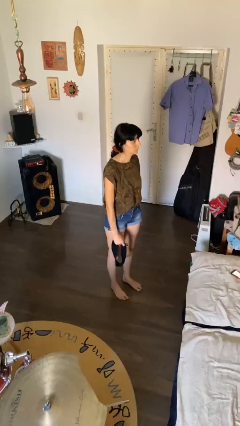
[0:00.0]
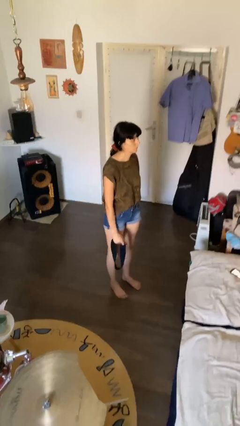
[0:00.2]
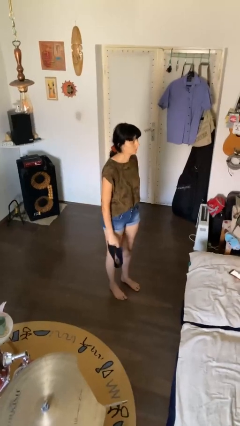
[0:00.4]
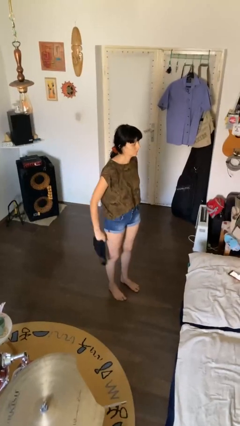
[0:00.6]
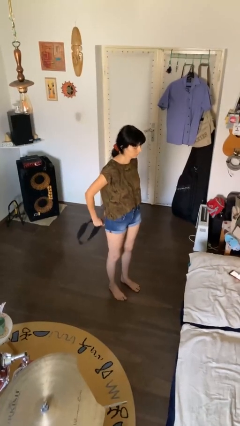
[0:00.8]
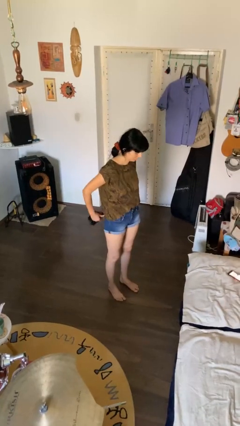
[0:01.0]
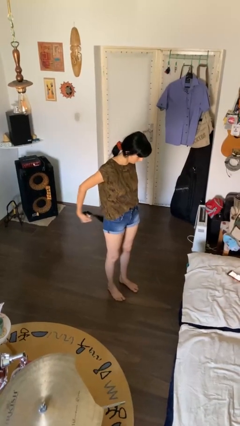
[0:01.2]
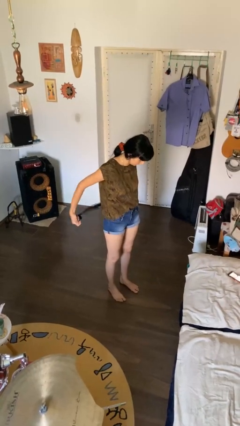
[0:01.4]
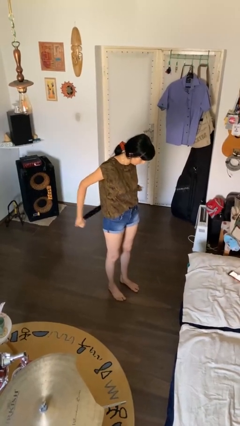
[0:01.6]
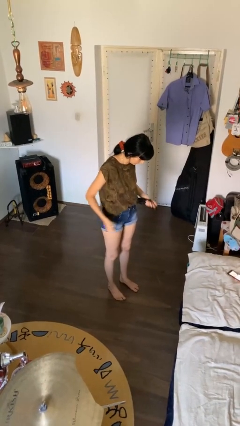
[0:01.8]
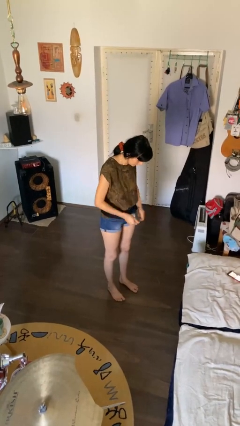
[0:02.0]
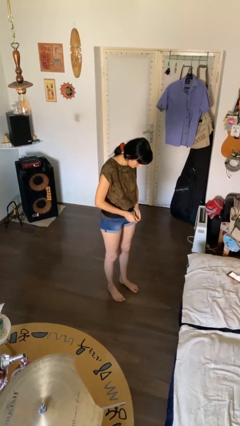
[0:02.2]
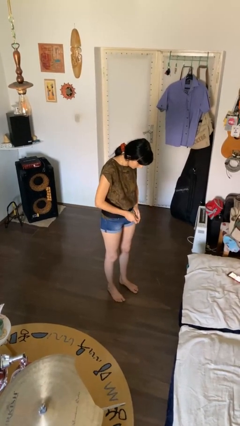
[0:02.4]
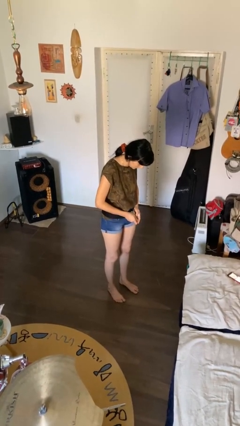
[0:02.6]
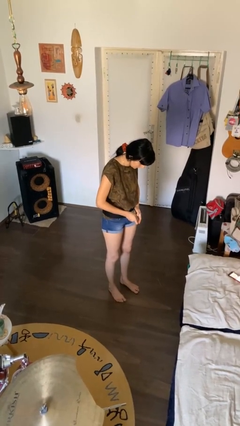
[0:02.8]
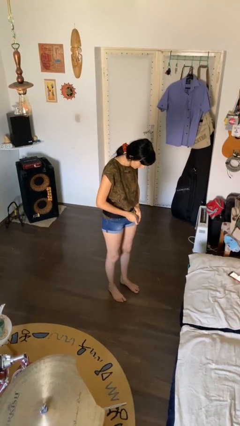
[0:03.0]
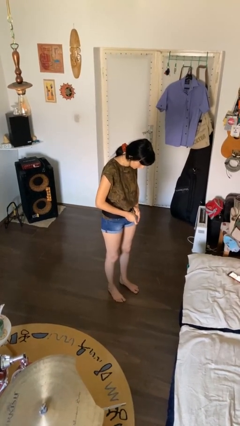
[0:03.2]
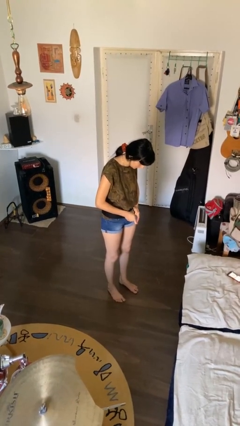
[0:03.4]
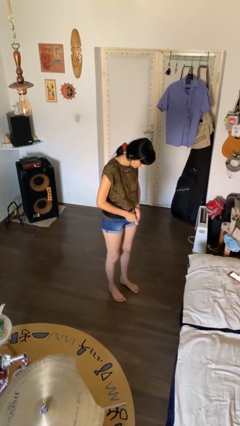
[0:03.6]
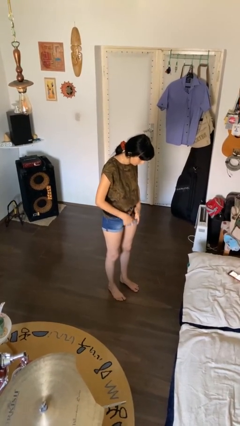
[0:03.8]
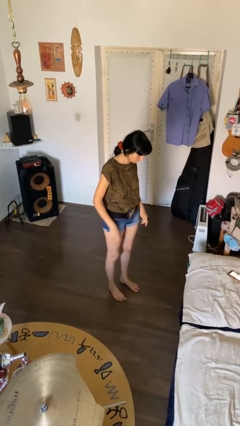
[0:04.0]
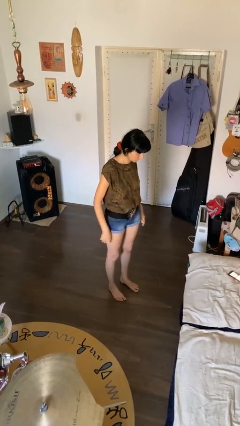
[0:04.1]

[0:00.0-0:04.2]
person puts on belt

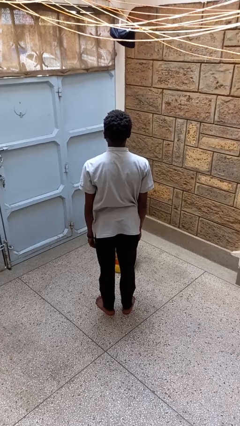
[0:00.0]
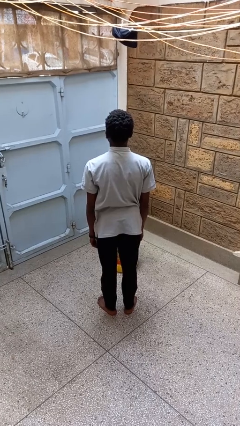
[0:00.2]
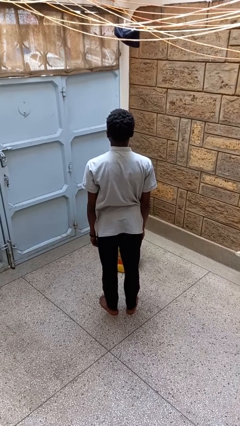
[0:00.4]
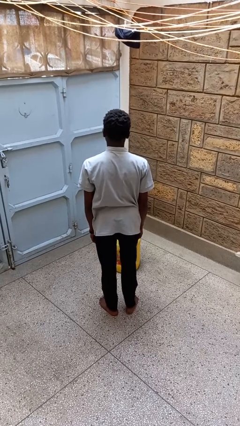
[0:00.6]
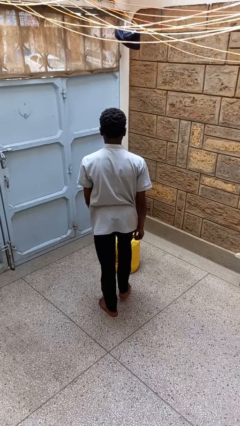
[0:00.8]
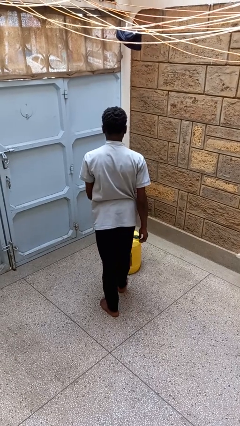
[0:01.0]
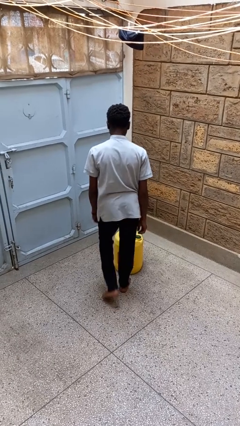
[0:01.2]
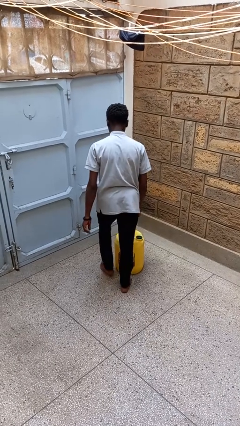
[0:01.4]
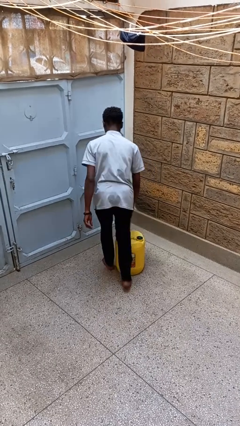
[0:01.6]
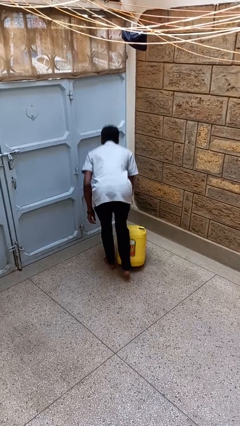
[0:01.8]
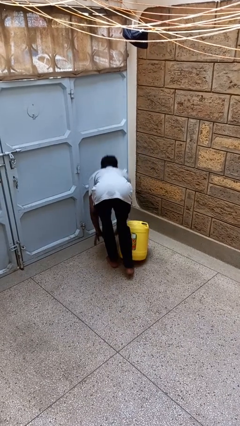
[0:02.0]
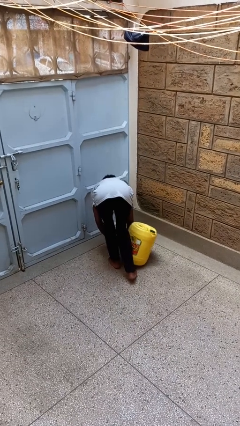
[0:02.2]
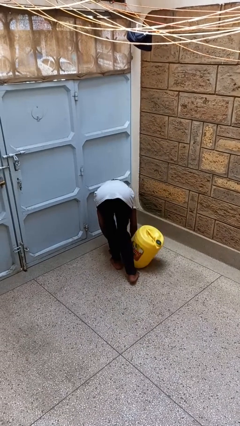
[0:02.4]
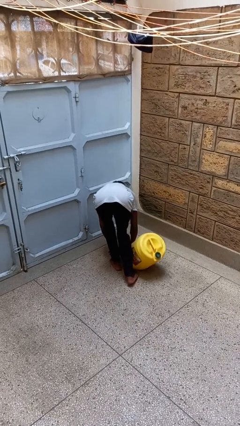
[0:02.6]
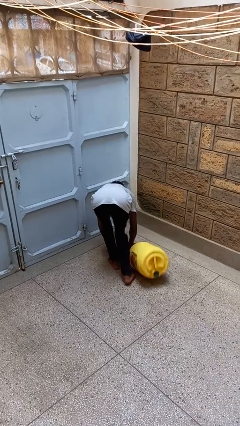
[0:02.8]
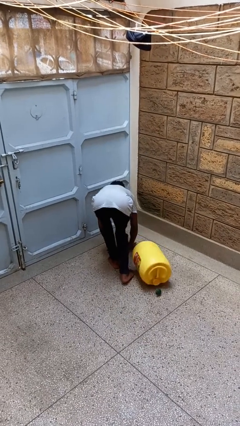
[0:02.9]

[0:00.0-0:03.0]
person trips on object on floor

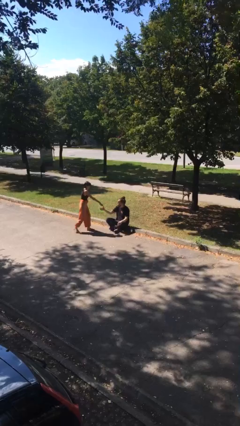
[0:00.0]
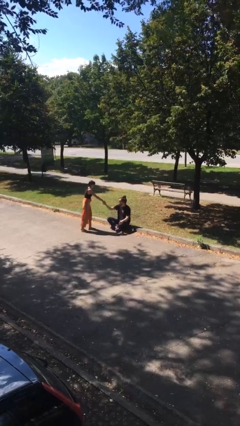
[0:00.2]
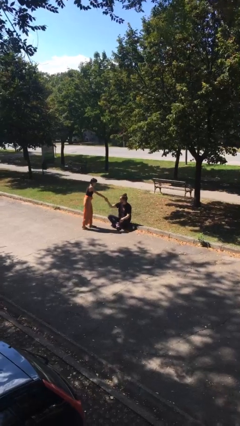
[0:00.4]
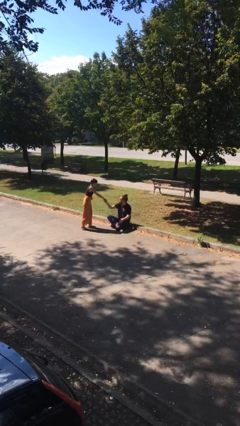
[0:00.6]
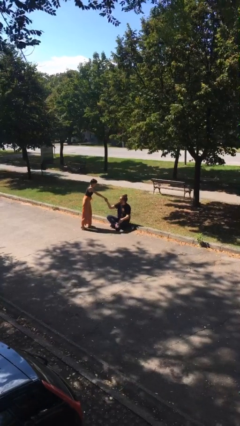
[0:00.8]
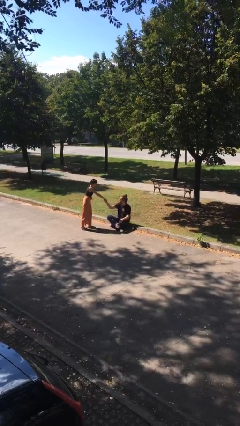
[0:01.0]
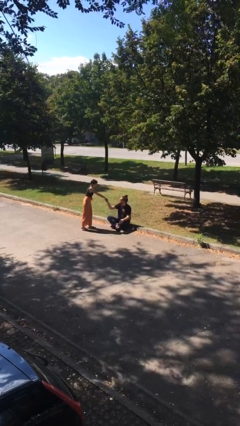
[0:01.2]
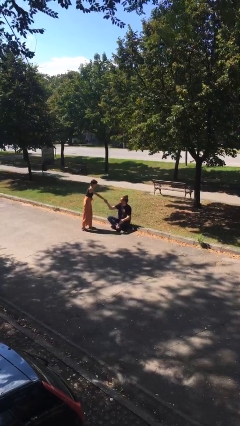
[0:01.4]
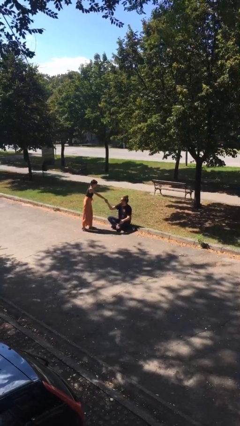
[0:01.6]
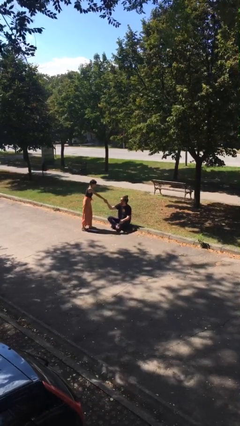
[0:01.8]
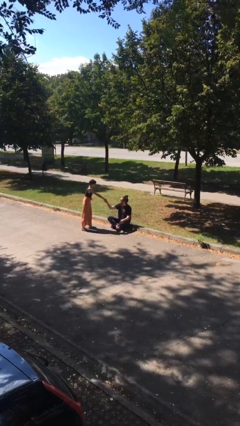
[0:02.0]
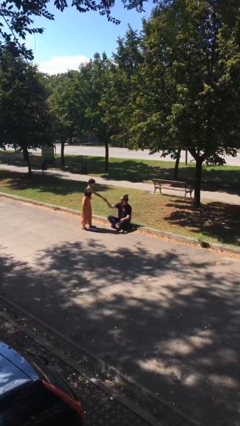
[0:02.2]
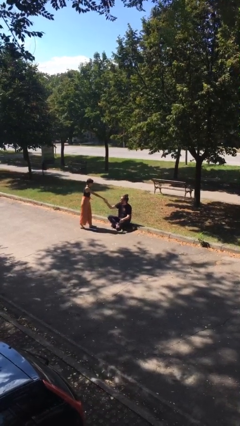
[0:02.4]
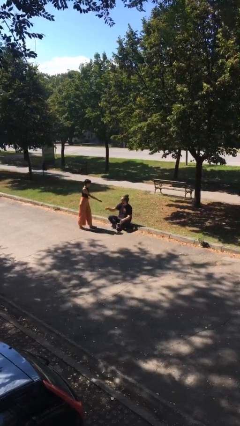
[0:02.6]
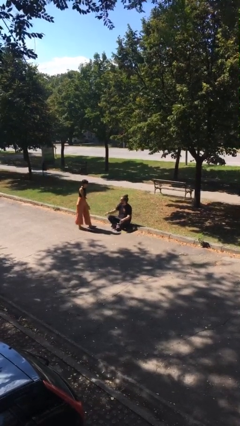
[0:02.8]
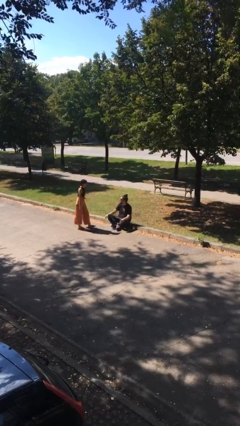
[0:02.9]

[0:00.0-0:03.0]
person shakes hand

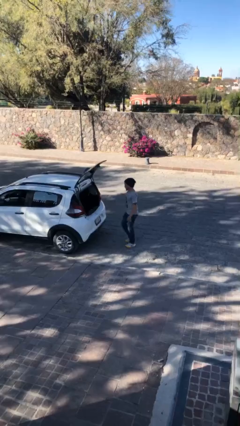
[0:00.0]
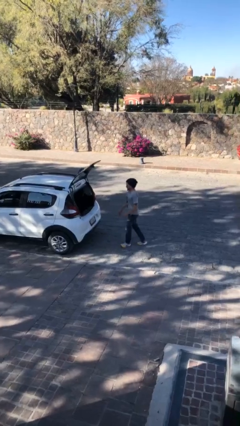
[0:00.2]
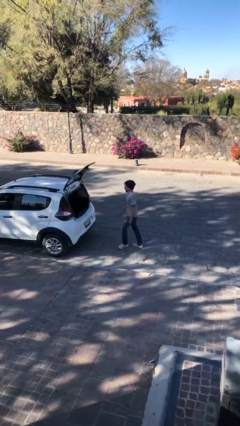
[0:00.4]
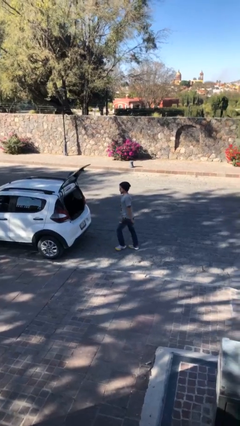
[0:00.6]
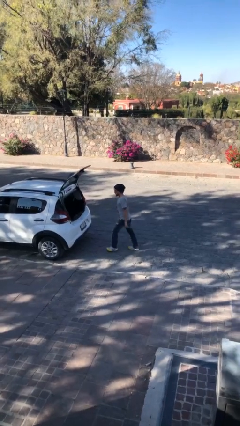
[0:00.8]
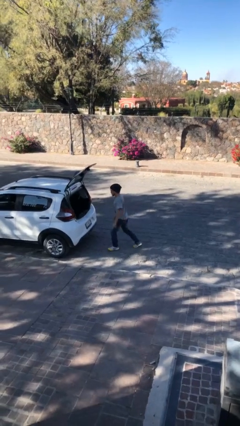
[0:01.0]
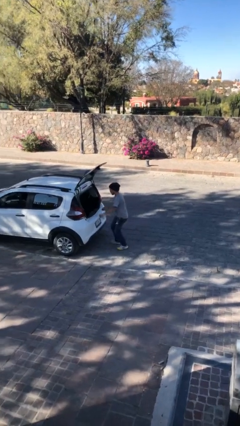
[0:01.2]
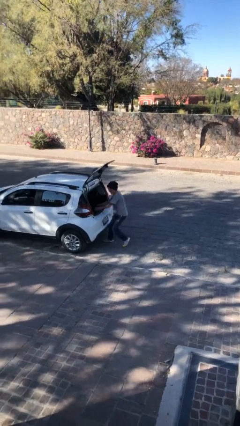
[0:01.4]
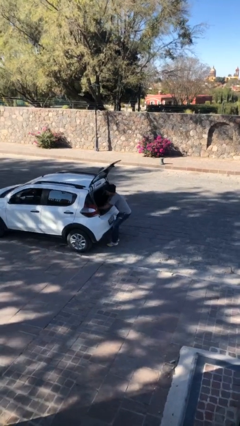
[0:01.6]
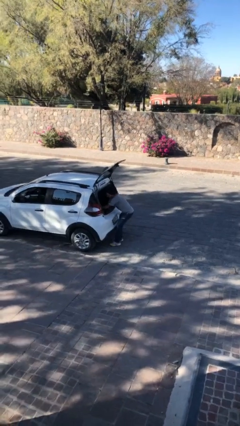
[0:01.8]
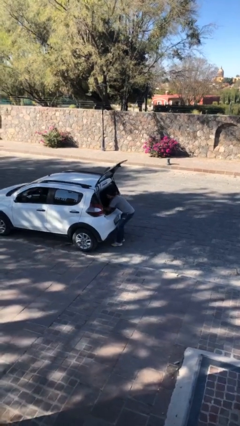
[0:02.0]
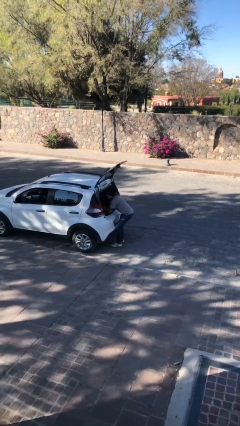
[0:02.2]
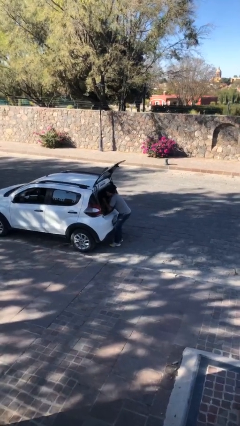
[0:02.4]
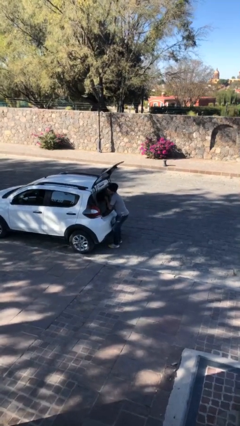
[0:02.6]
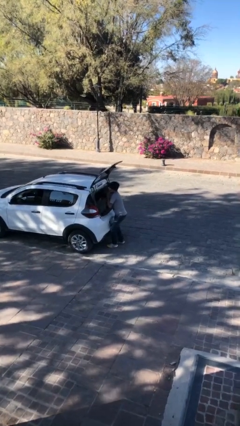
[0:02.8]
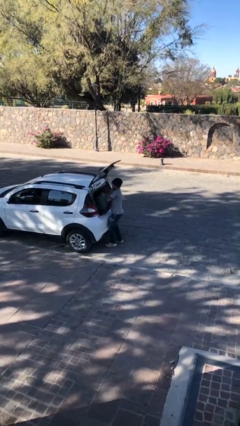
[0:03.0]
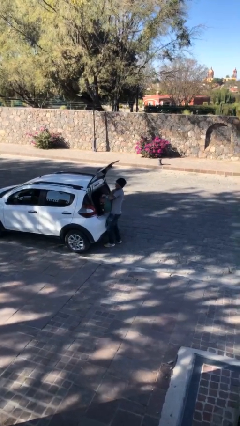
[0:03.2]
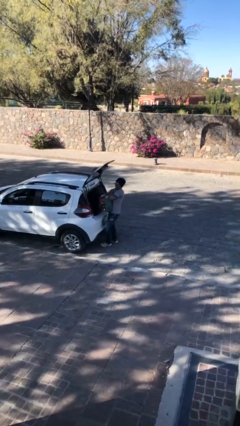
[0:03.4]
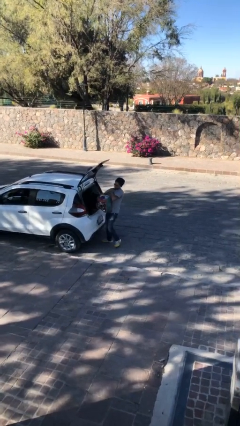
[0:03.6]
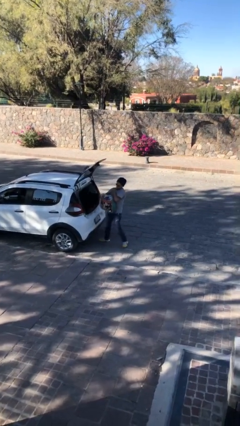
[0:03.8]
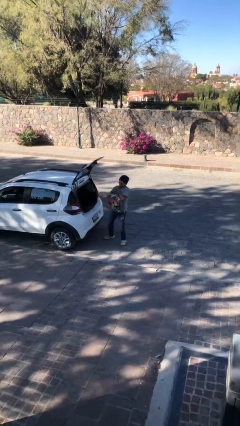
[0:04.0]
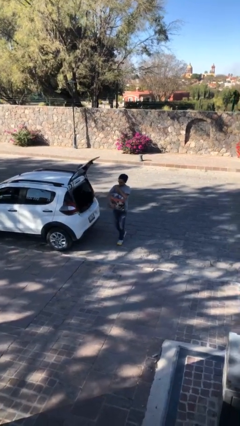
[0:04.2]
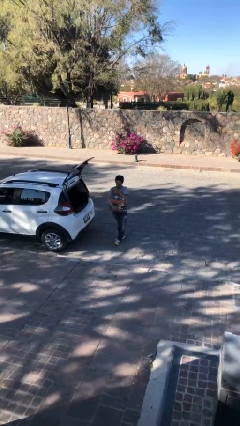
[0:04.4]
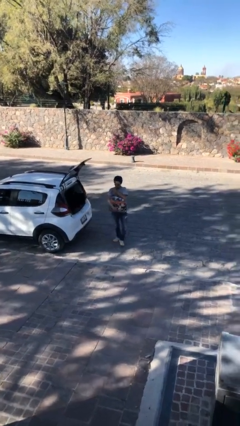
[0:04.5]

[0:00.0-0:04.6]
person unloads car

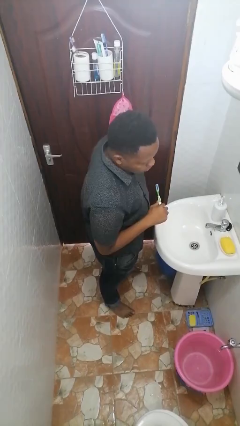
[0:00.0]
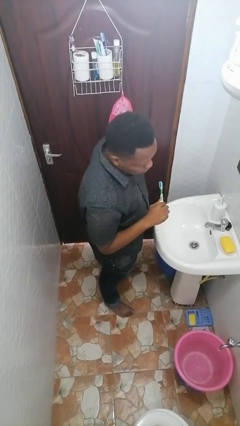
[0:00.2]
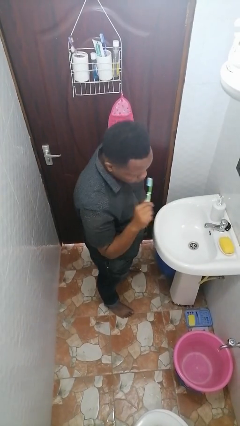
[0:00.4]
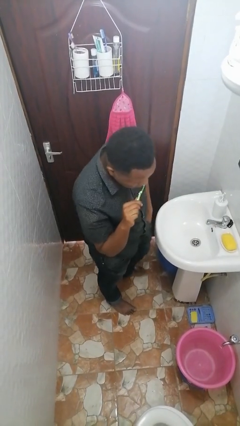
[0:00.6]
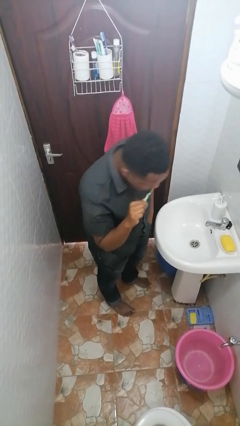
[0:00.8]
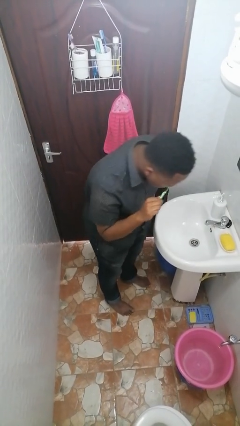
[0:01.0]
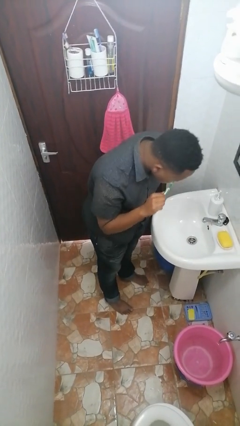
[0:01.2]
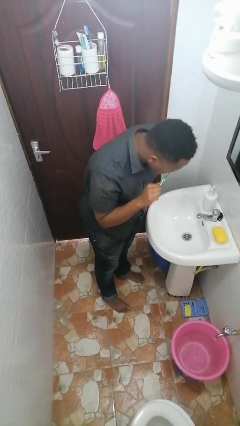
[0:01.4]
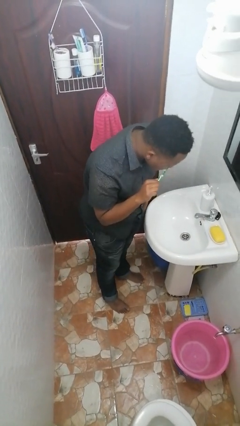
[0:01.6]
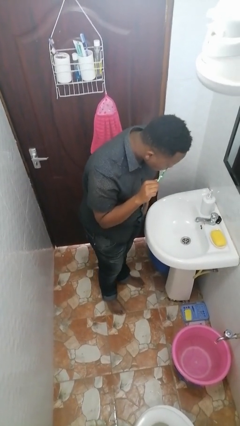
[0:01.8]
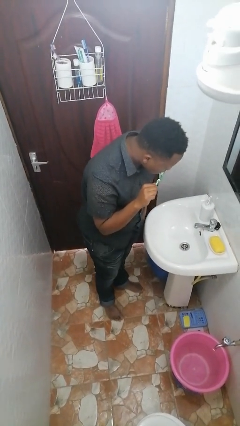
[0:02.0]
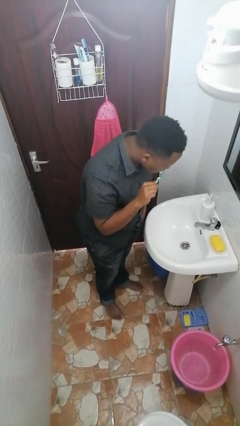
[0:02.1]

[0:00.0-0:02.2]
person brushes teeth

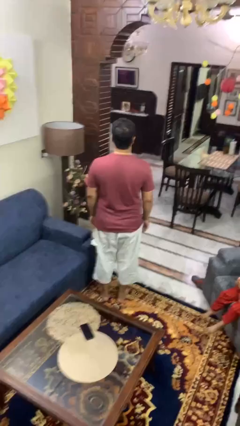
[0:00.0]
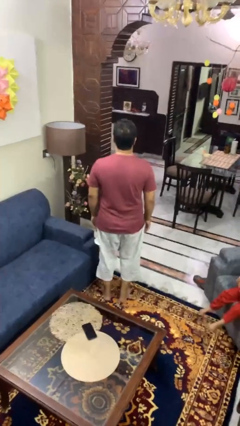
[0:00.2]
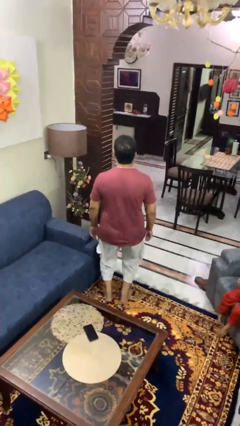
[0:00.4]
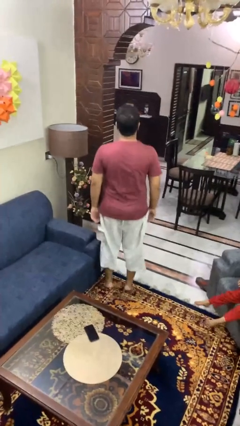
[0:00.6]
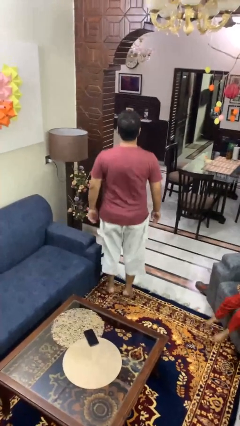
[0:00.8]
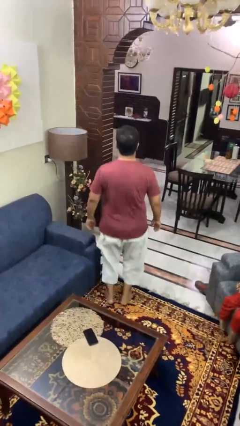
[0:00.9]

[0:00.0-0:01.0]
person jumps
